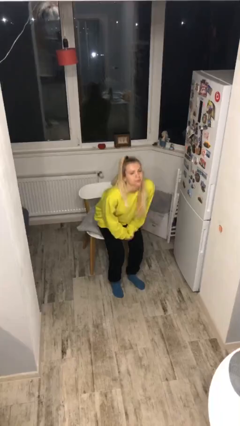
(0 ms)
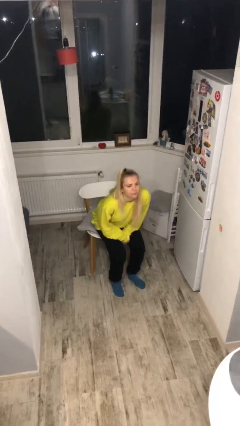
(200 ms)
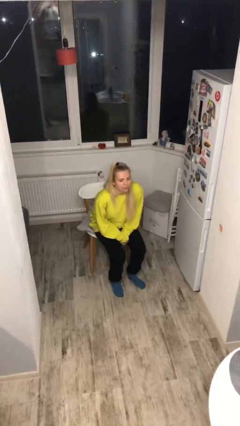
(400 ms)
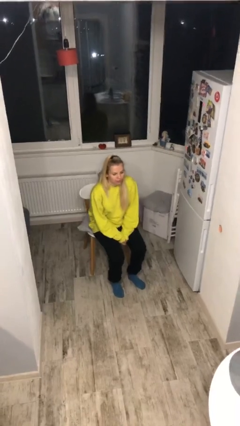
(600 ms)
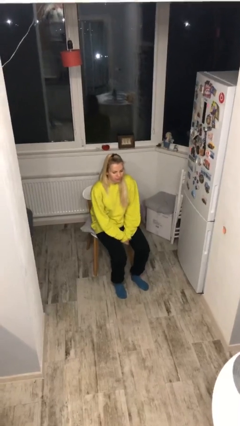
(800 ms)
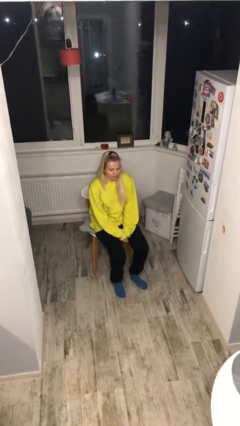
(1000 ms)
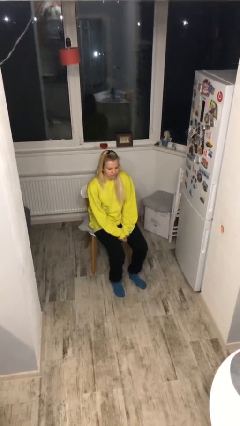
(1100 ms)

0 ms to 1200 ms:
person sits down

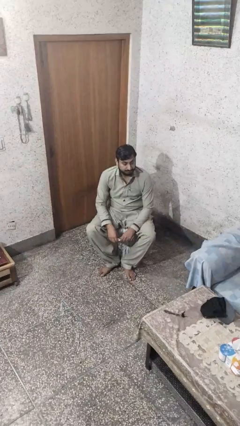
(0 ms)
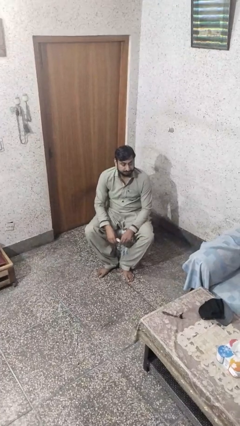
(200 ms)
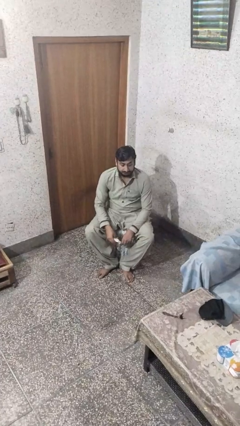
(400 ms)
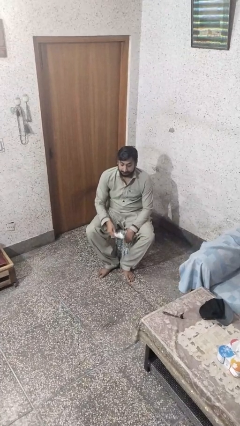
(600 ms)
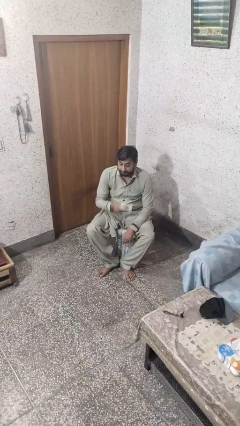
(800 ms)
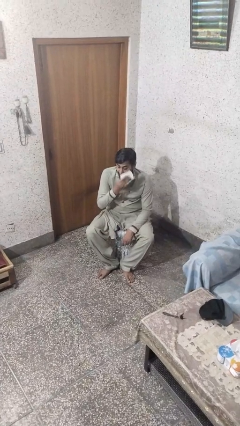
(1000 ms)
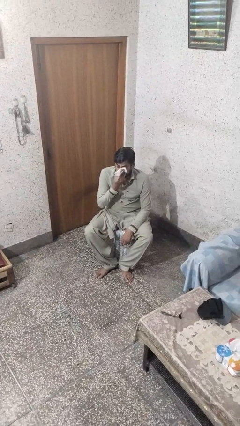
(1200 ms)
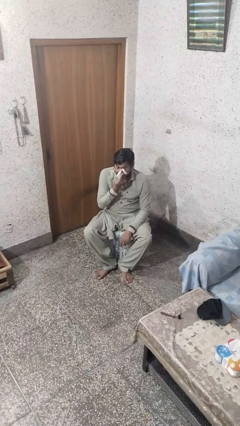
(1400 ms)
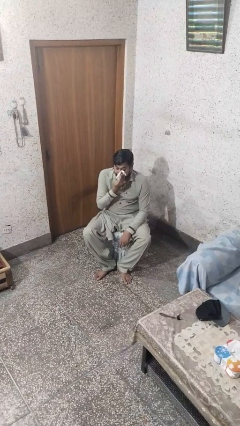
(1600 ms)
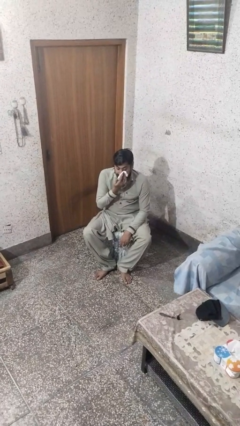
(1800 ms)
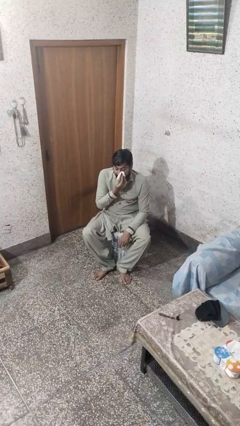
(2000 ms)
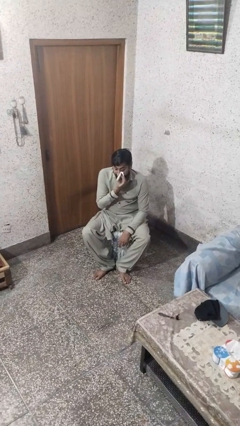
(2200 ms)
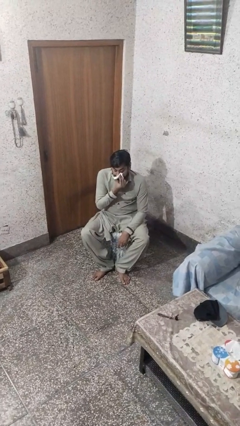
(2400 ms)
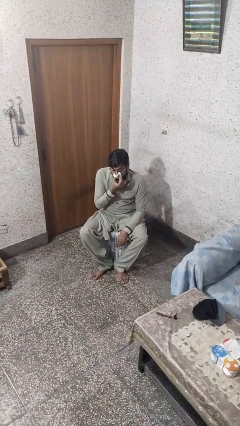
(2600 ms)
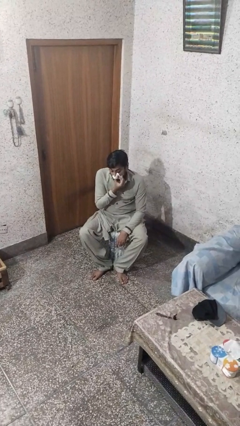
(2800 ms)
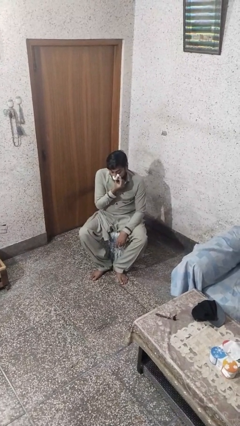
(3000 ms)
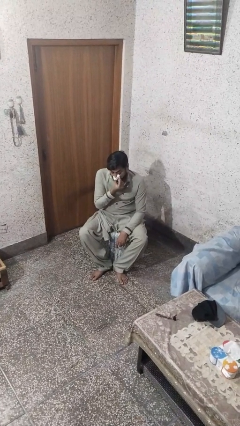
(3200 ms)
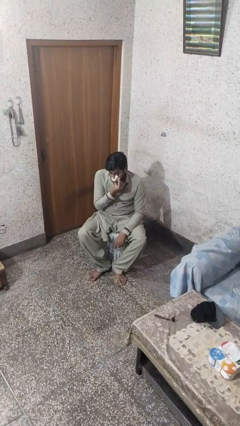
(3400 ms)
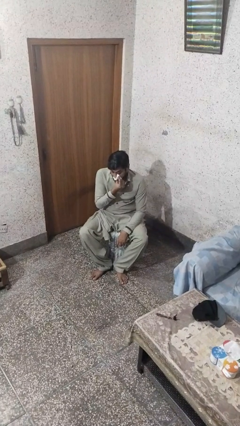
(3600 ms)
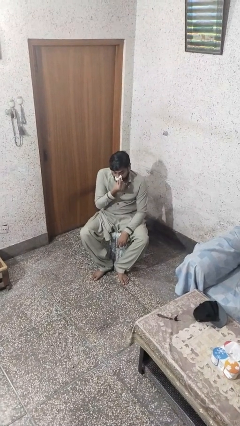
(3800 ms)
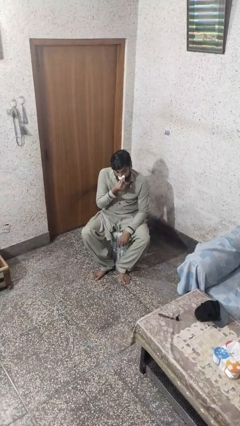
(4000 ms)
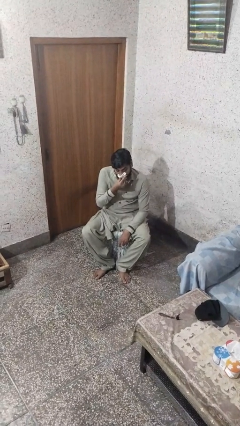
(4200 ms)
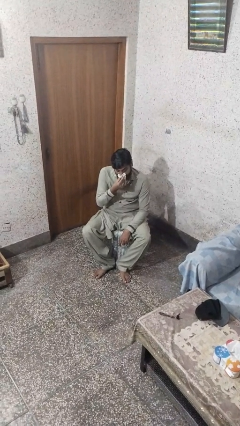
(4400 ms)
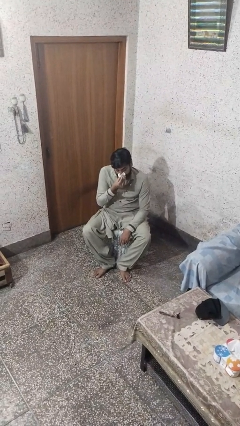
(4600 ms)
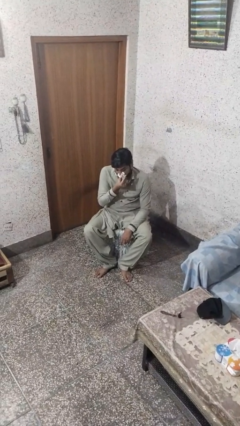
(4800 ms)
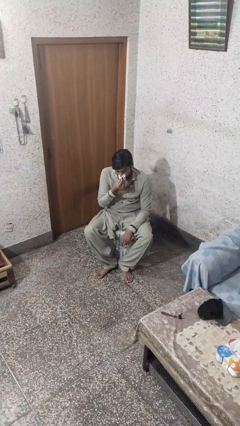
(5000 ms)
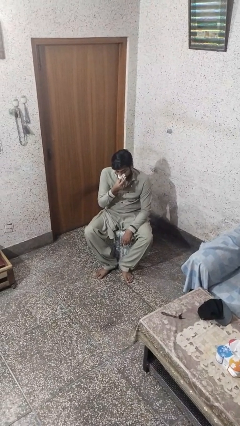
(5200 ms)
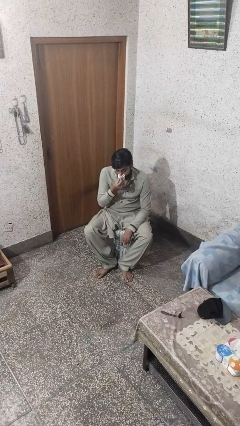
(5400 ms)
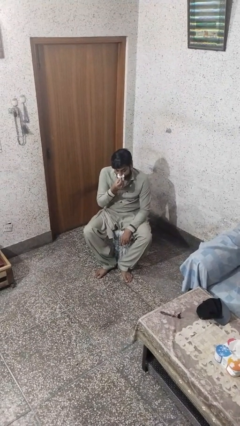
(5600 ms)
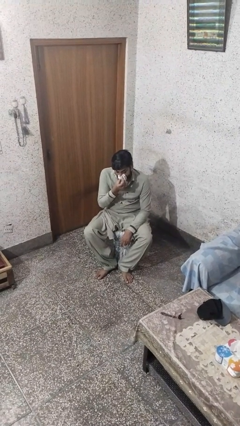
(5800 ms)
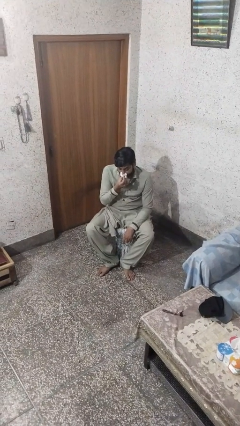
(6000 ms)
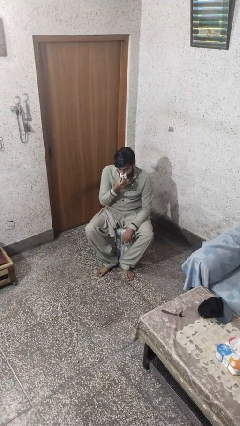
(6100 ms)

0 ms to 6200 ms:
person blows nose

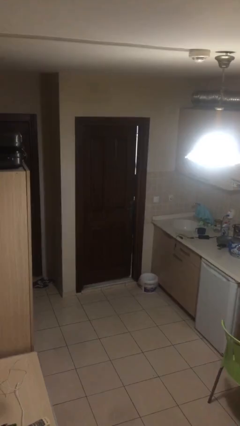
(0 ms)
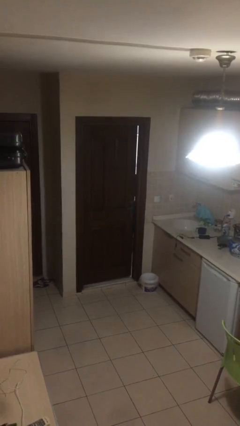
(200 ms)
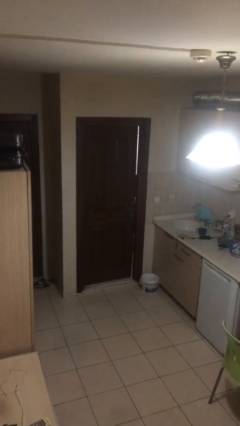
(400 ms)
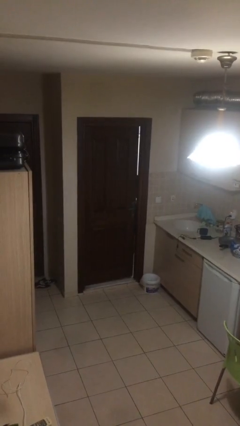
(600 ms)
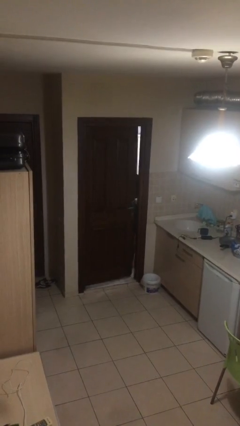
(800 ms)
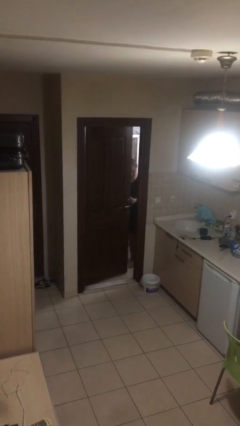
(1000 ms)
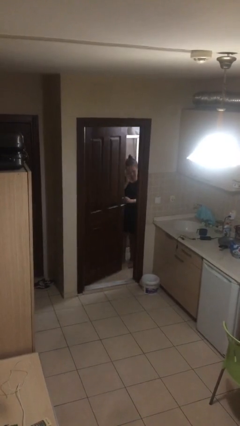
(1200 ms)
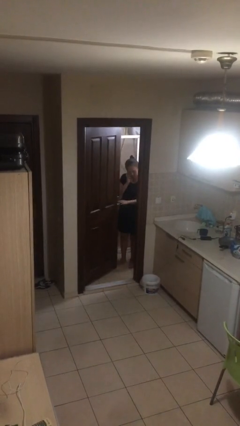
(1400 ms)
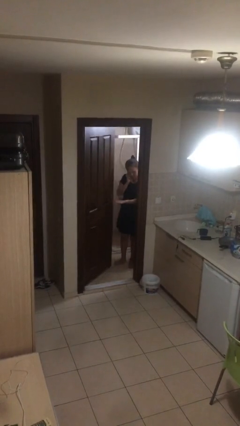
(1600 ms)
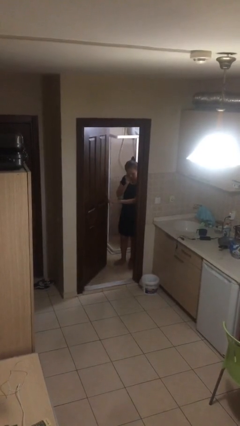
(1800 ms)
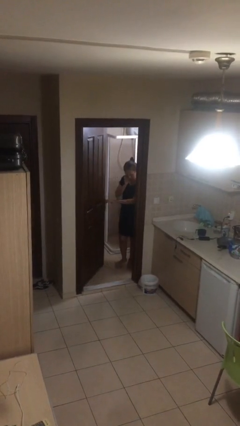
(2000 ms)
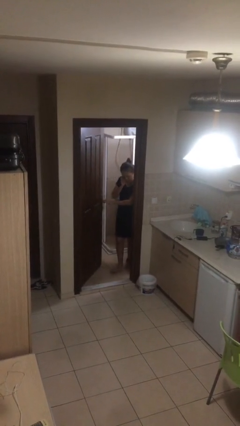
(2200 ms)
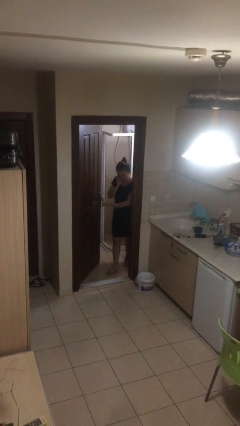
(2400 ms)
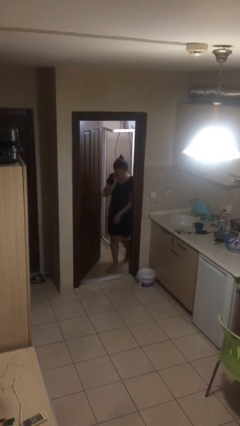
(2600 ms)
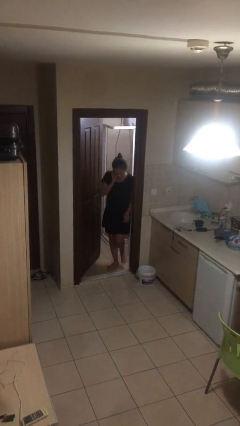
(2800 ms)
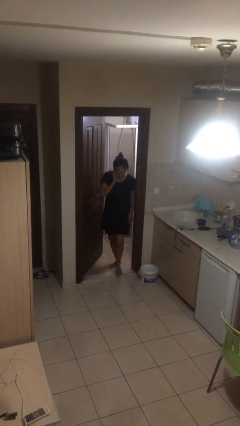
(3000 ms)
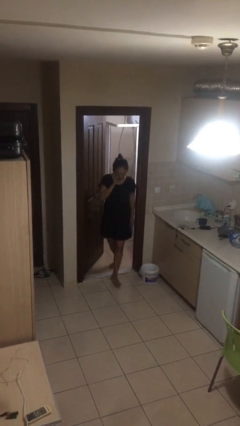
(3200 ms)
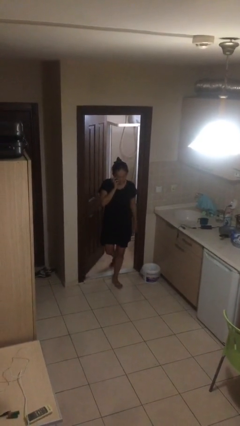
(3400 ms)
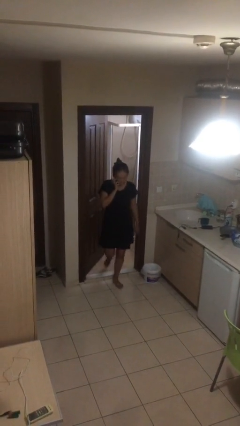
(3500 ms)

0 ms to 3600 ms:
person opens facility door

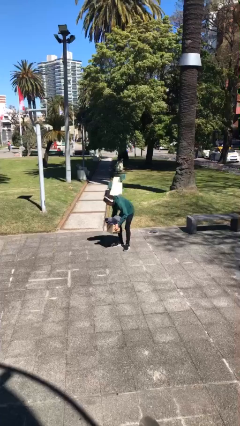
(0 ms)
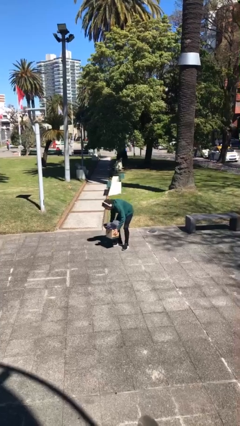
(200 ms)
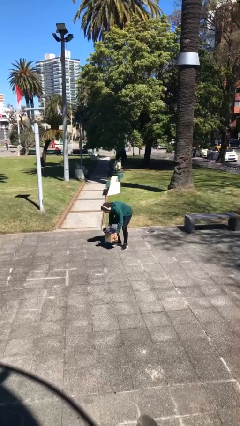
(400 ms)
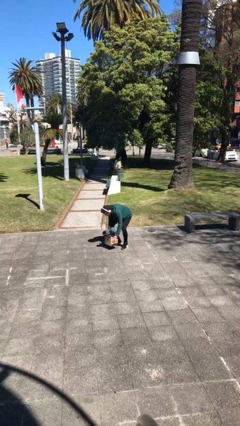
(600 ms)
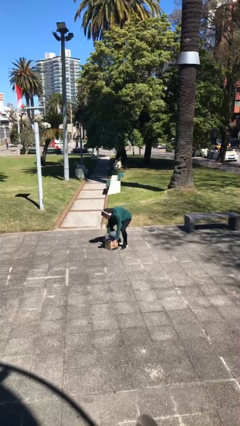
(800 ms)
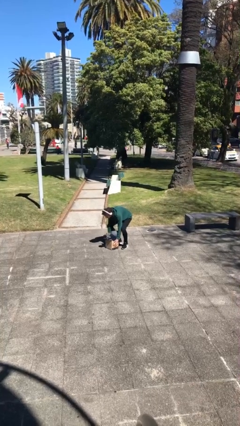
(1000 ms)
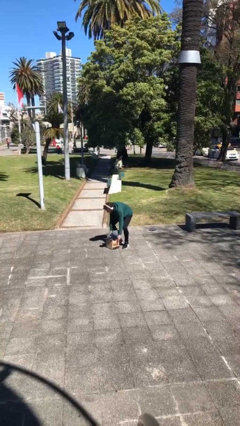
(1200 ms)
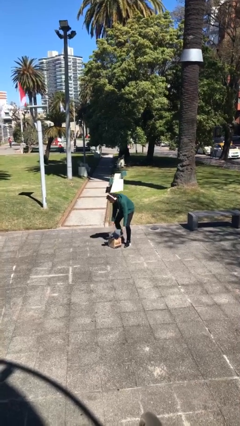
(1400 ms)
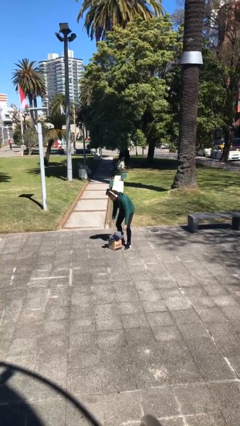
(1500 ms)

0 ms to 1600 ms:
person puts down object on floor

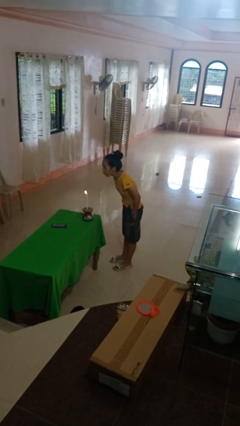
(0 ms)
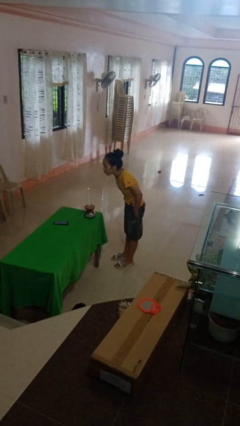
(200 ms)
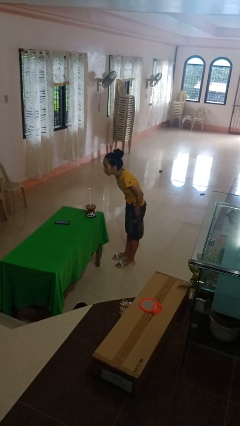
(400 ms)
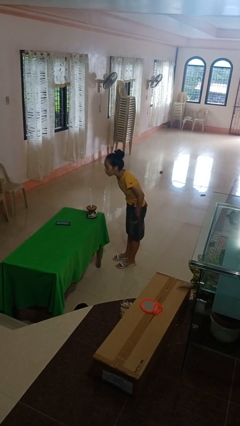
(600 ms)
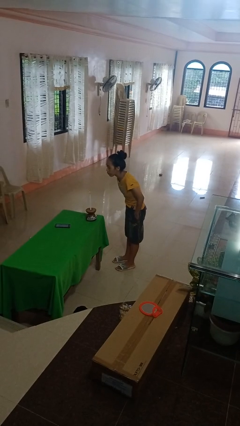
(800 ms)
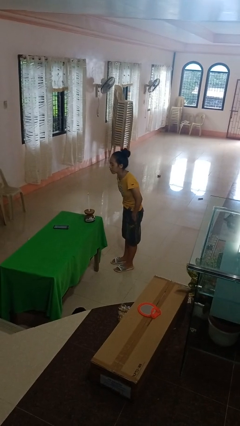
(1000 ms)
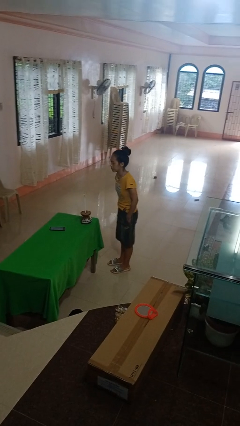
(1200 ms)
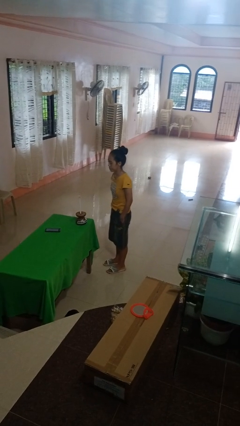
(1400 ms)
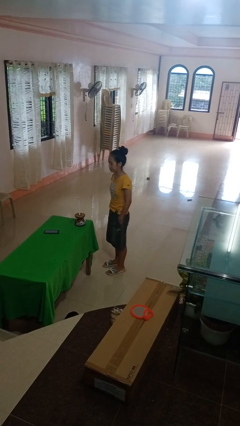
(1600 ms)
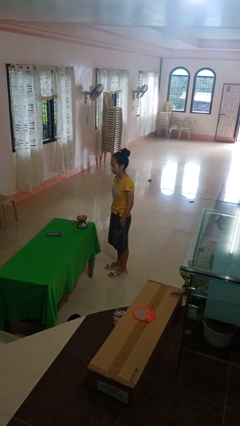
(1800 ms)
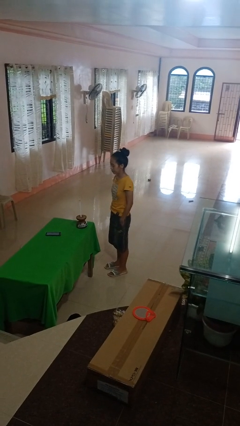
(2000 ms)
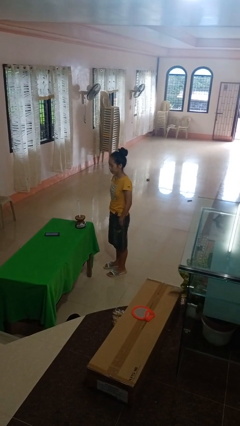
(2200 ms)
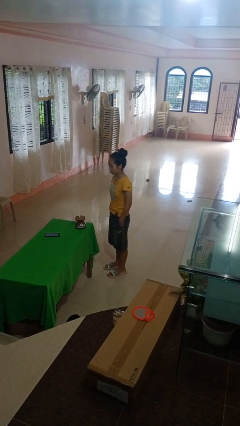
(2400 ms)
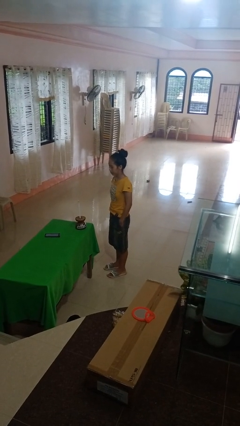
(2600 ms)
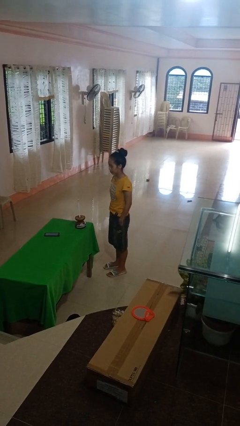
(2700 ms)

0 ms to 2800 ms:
person extinguishes candle

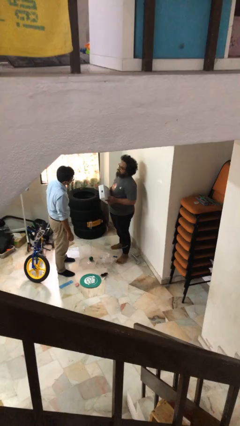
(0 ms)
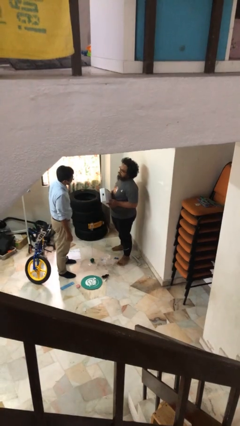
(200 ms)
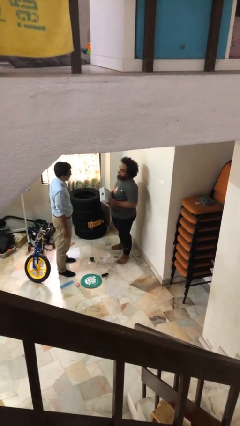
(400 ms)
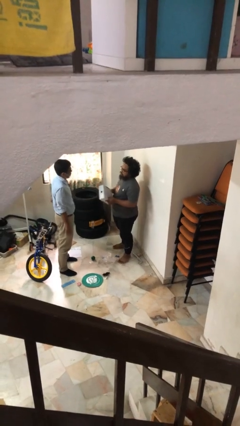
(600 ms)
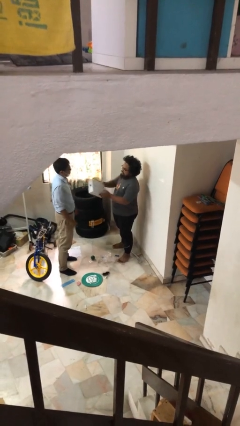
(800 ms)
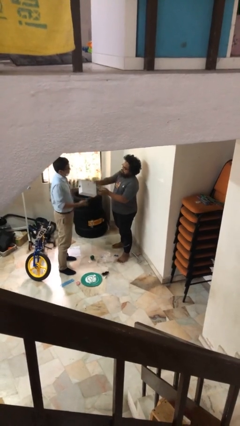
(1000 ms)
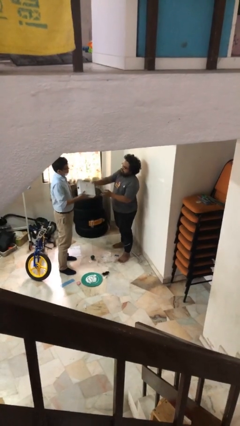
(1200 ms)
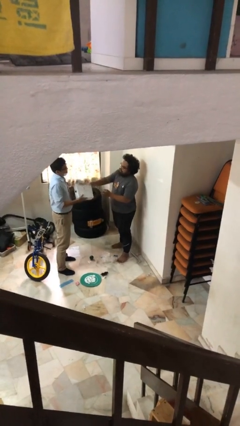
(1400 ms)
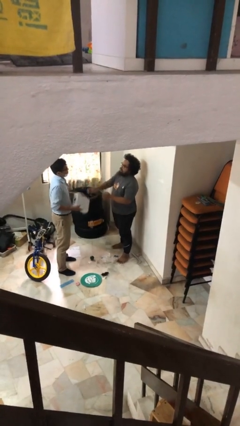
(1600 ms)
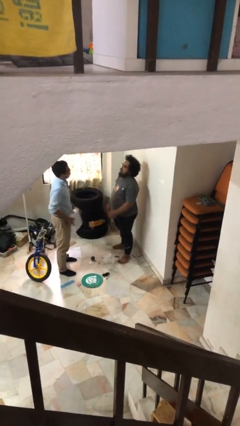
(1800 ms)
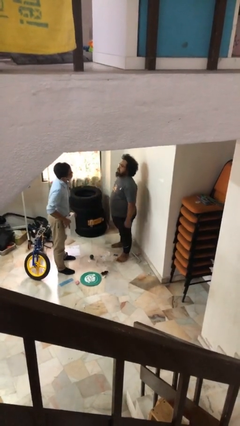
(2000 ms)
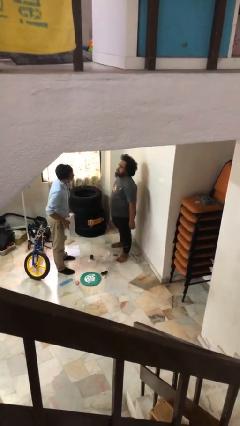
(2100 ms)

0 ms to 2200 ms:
person transfers object to person
